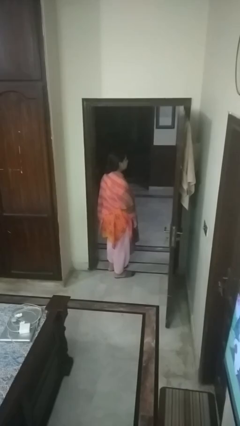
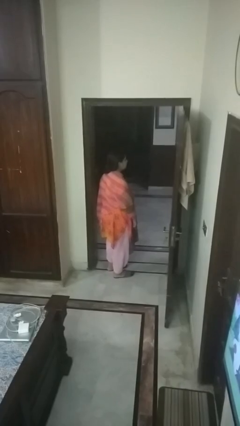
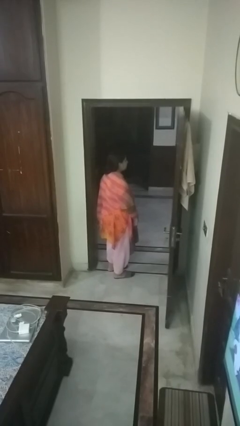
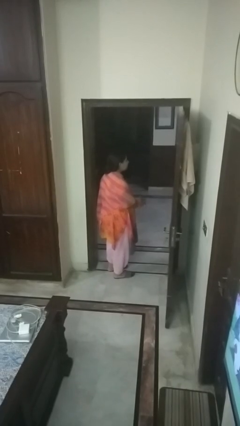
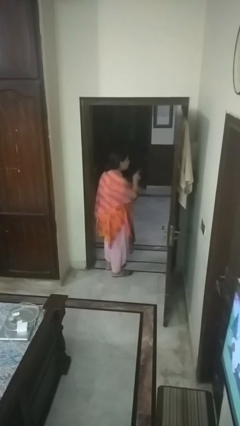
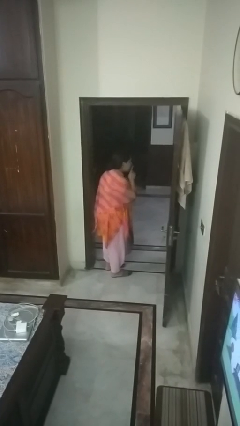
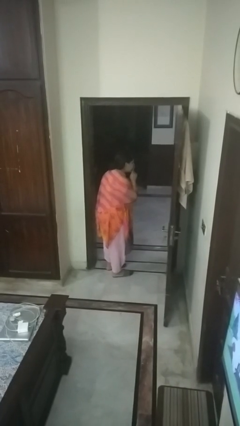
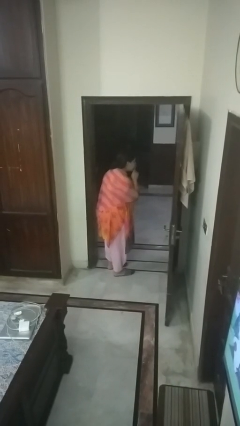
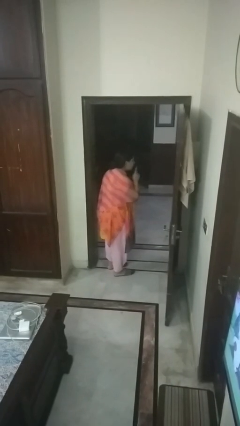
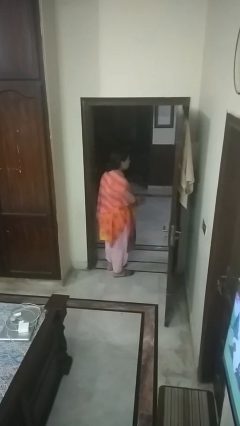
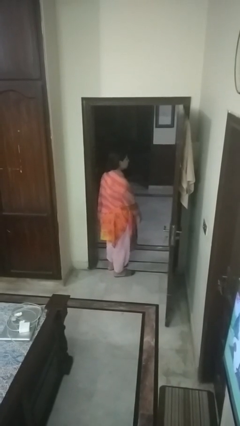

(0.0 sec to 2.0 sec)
person gestures be quiet

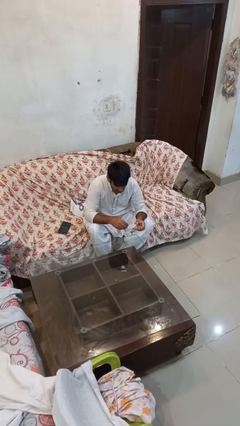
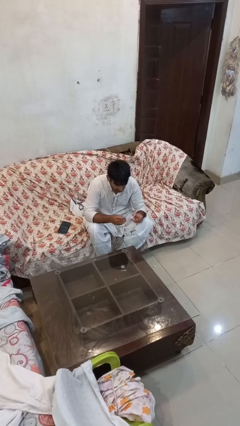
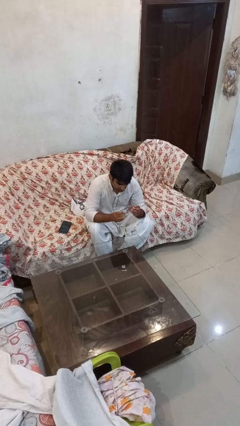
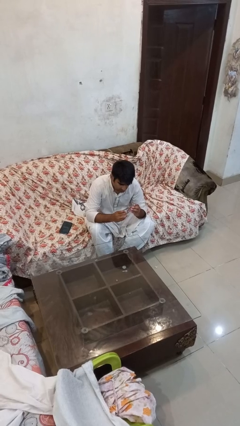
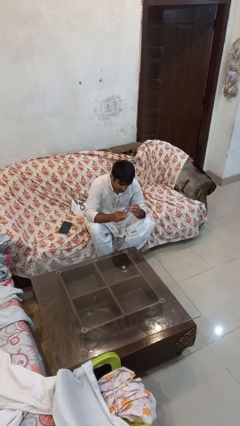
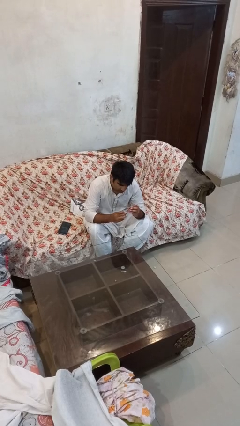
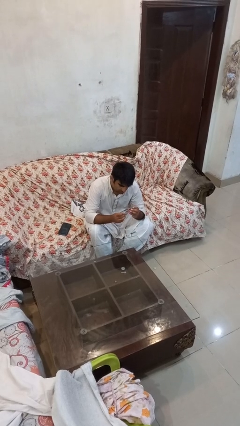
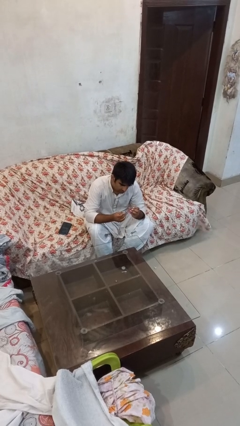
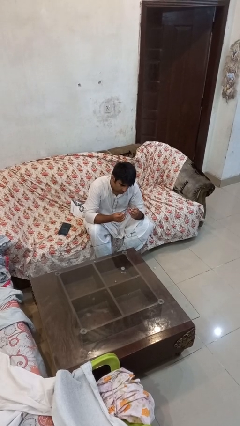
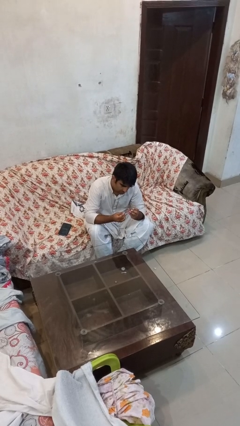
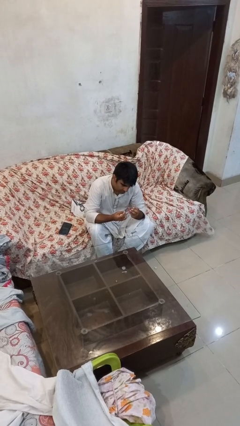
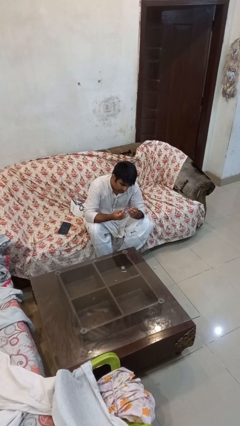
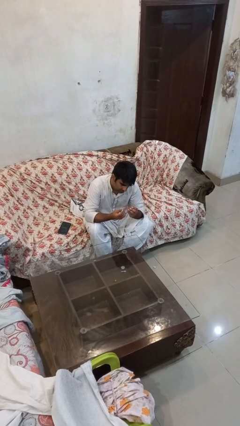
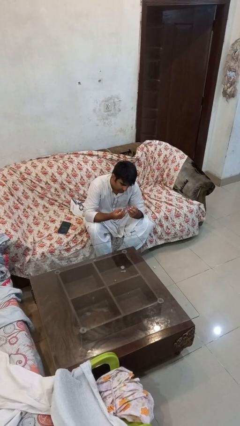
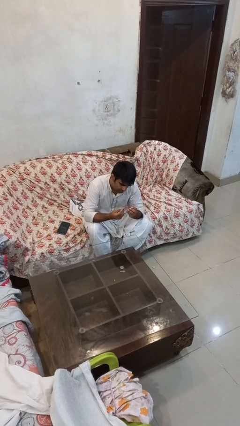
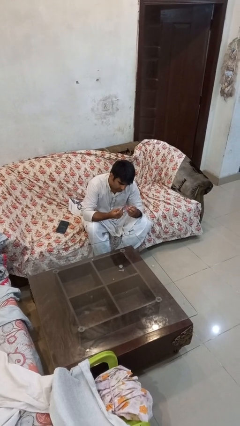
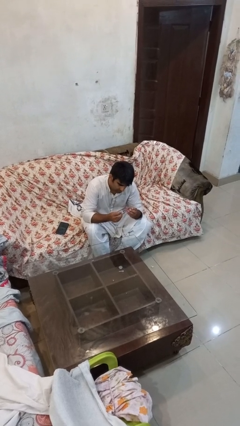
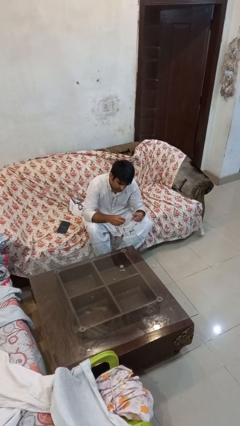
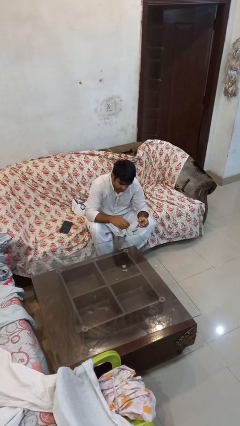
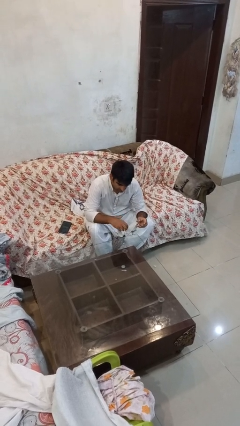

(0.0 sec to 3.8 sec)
person clips fingernails

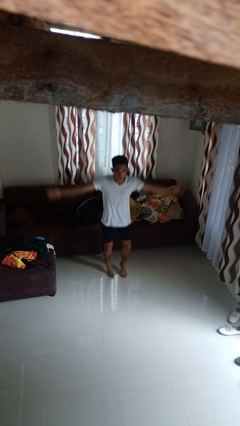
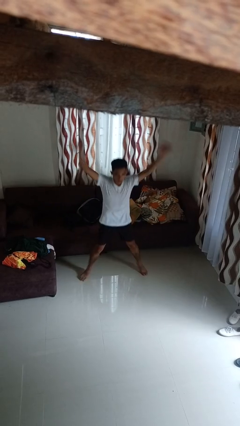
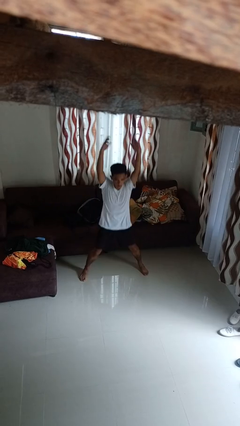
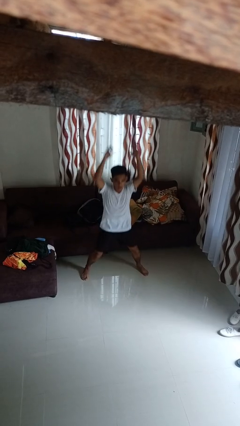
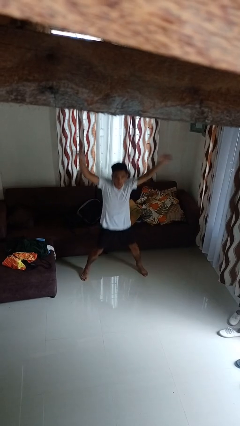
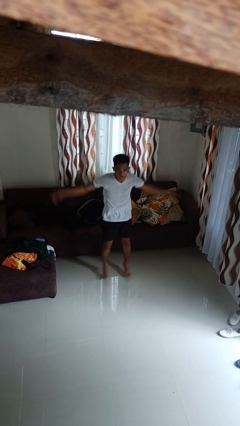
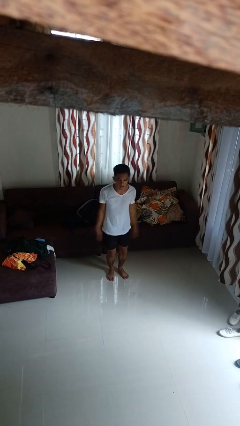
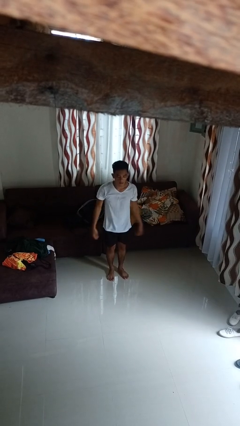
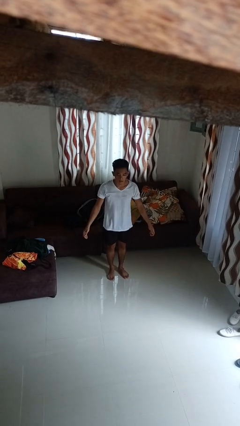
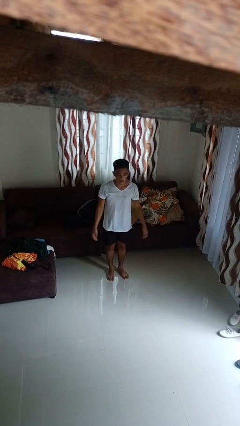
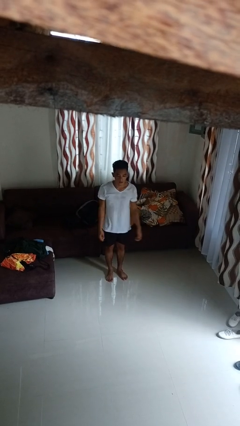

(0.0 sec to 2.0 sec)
person exercises with jumping jacks

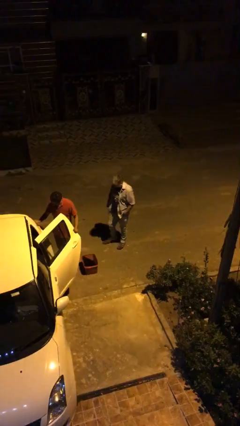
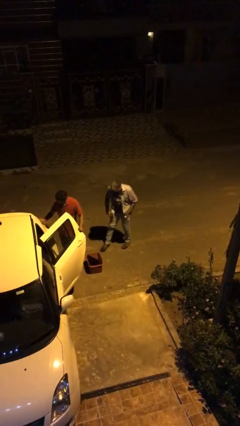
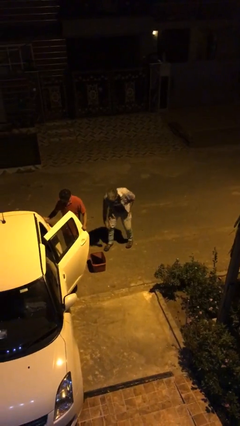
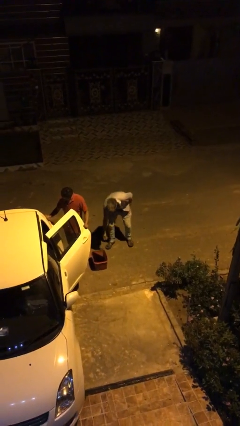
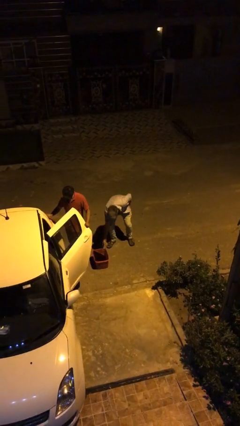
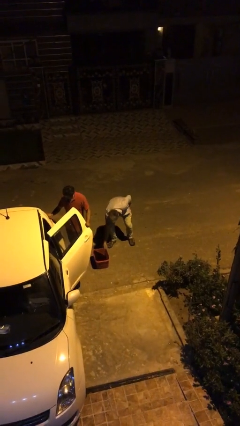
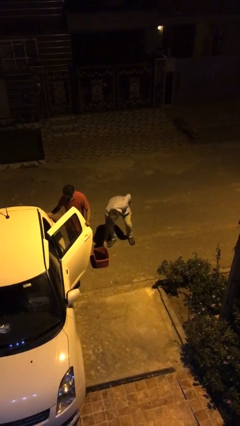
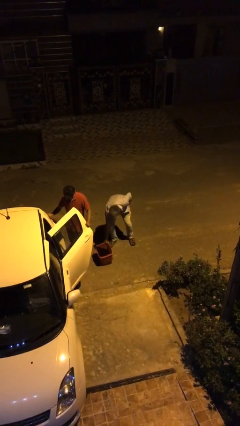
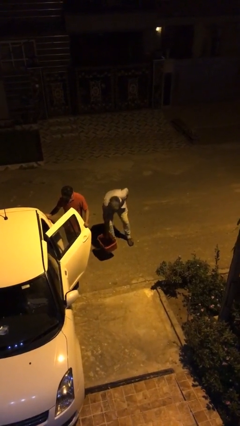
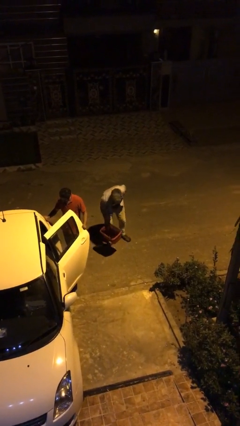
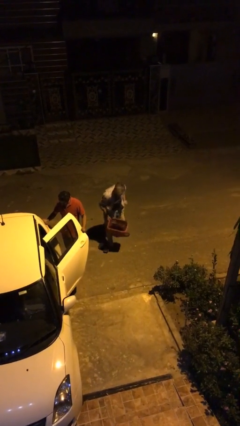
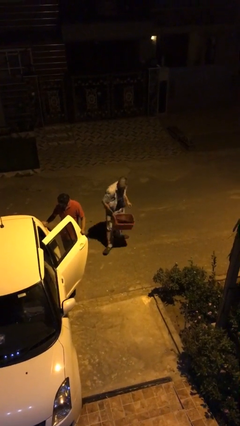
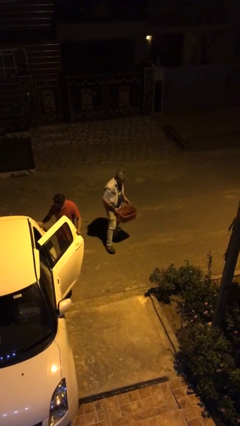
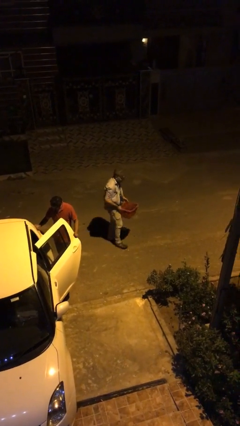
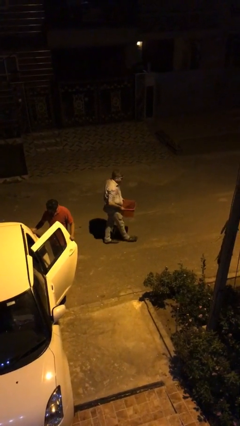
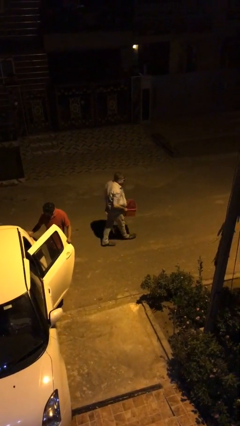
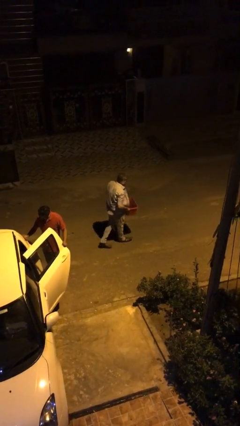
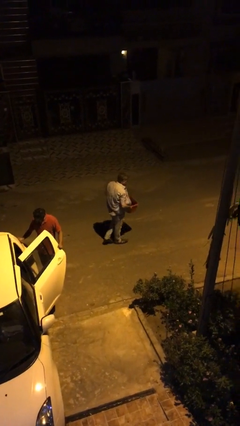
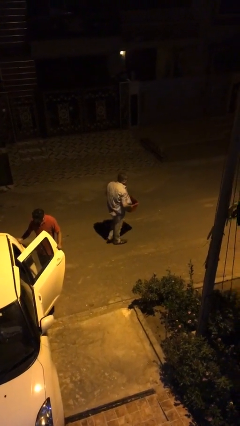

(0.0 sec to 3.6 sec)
person steals object from person

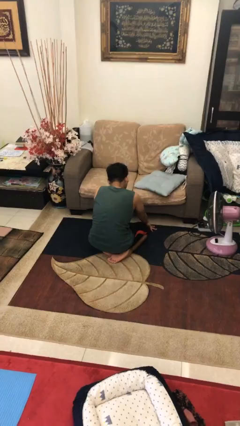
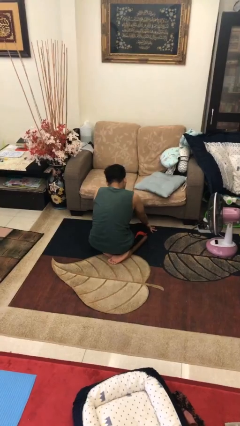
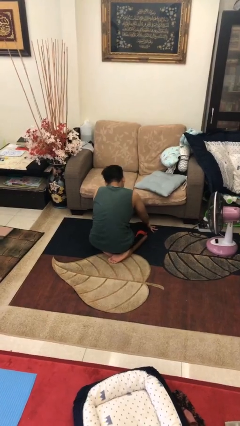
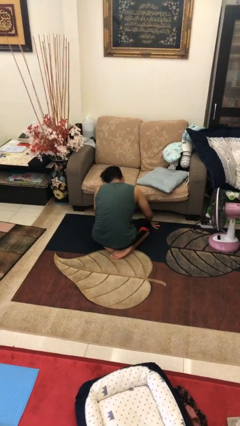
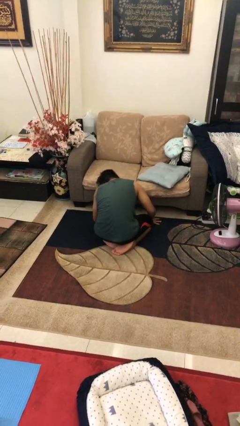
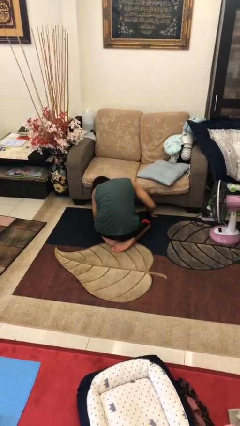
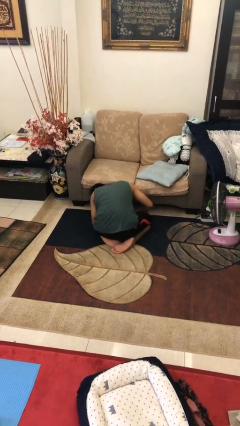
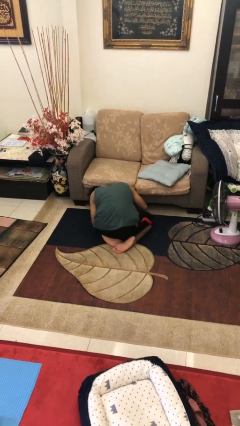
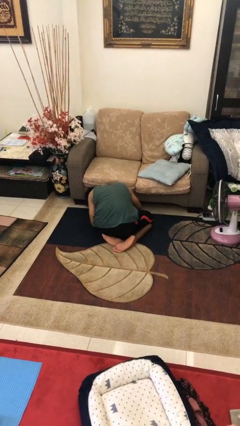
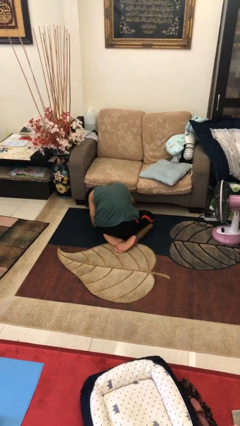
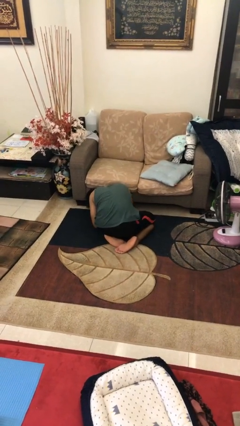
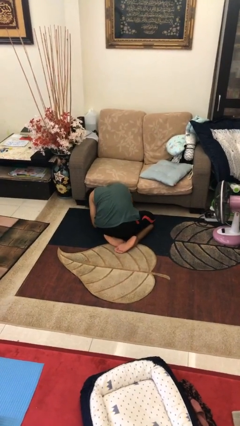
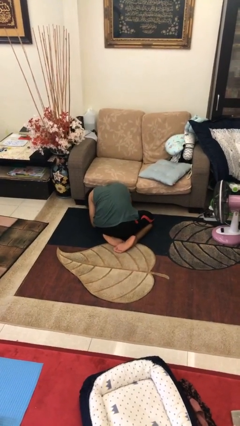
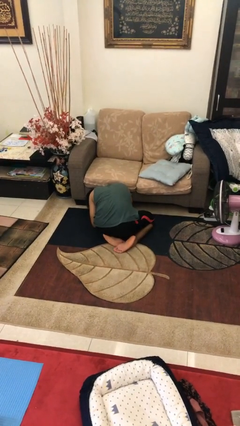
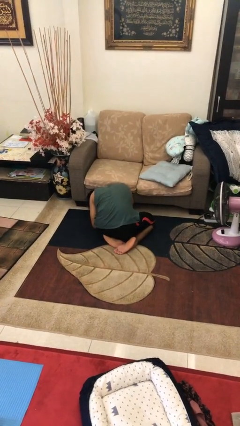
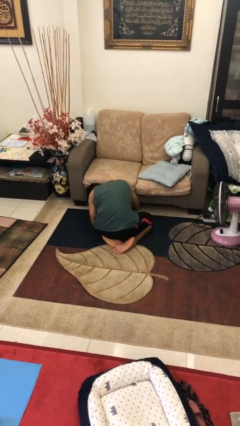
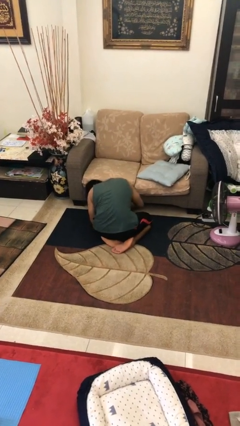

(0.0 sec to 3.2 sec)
person searches under couch

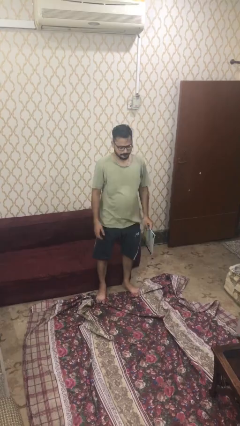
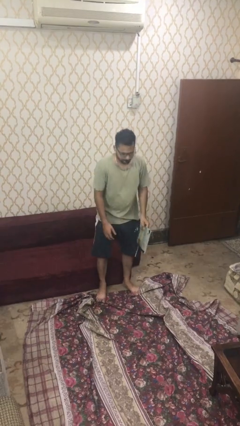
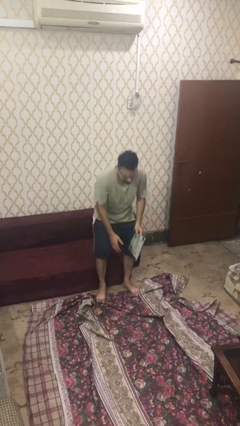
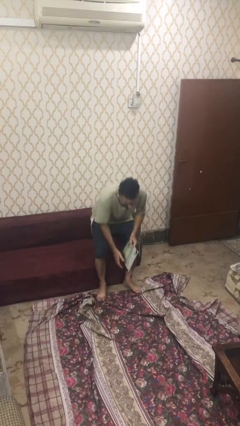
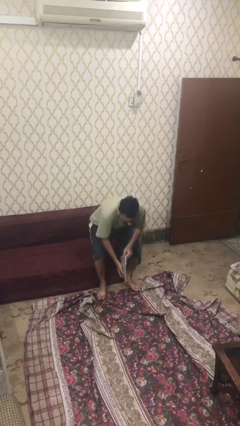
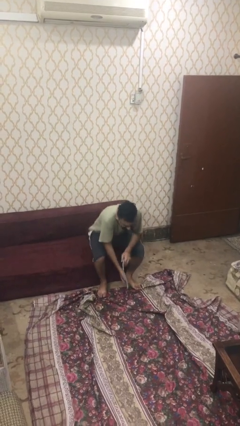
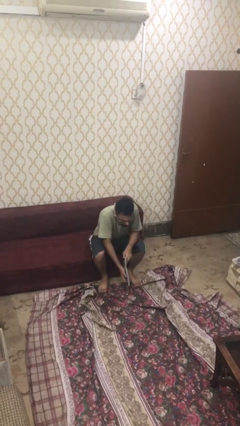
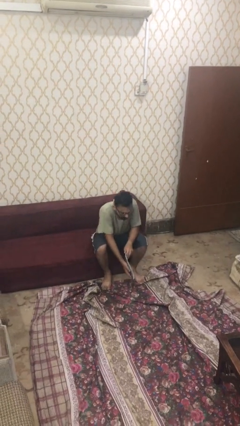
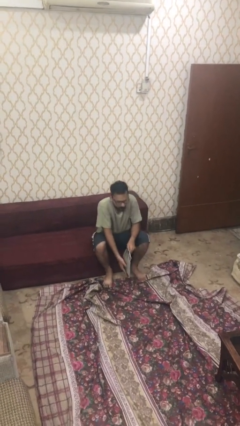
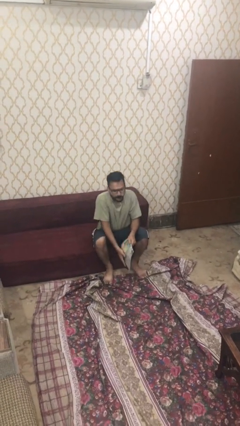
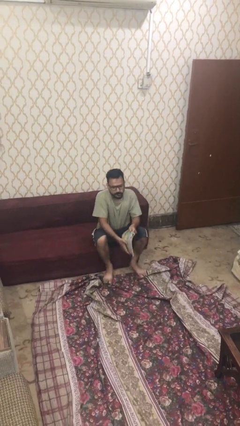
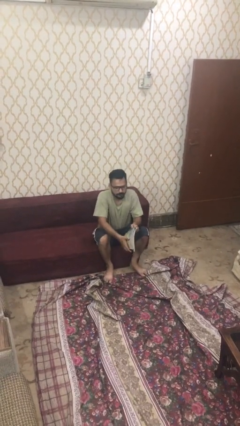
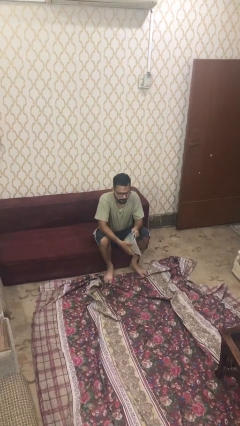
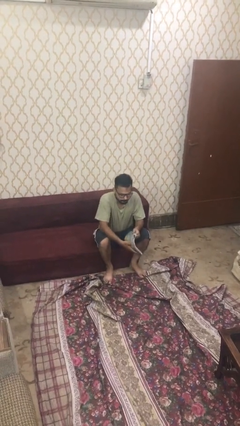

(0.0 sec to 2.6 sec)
person sits down
